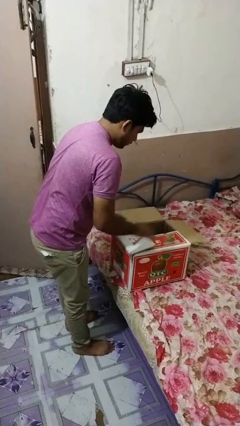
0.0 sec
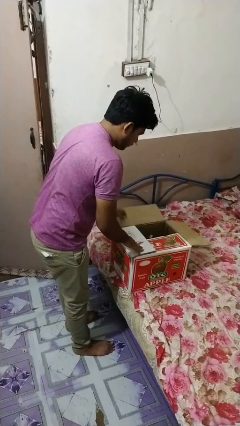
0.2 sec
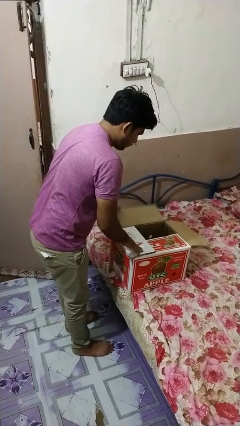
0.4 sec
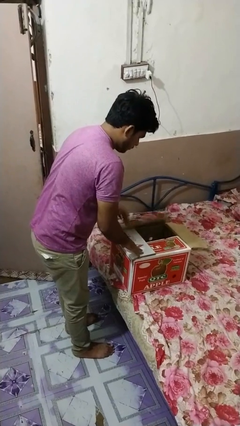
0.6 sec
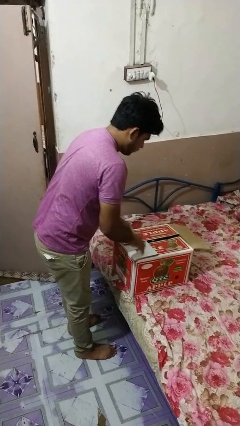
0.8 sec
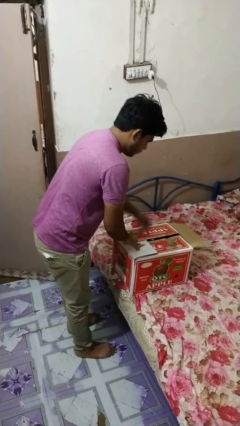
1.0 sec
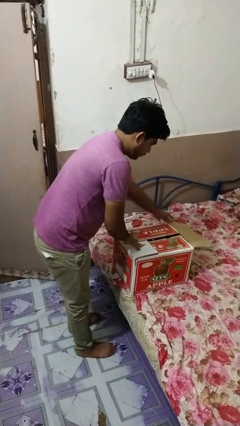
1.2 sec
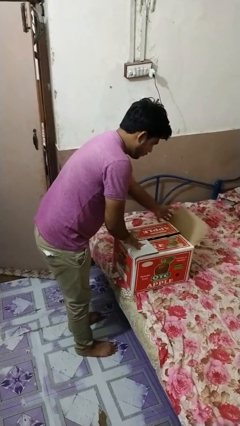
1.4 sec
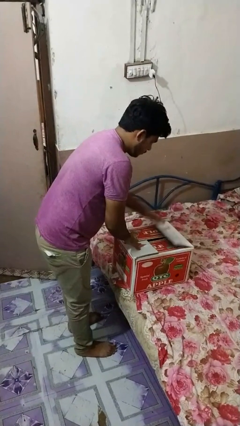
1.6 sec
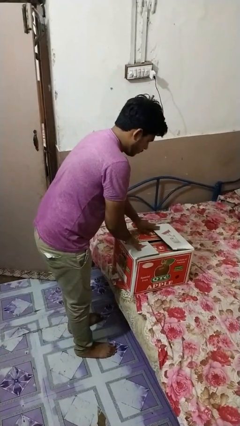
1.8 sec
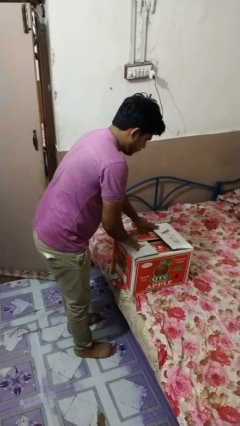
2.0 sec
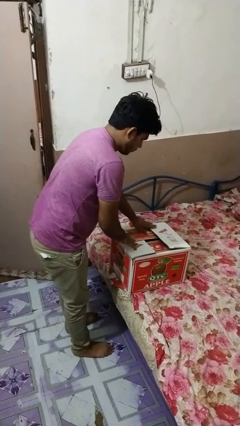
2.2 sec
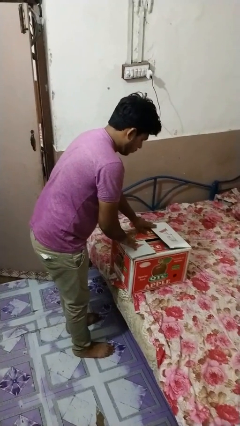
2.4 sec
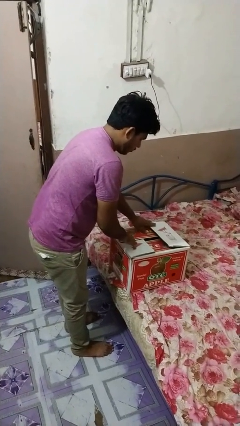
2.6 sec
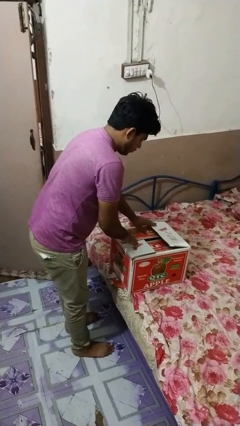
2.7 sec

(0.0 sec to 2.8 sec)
person closes box

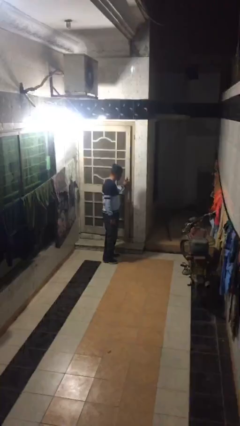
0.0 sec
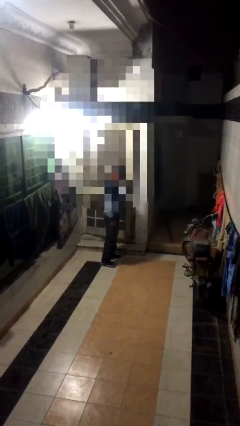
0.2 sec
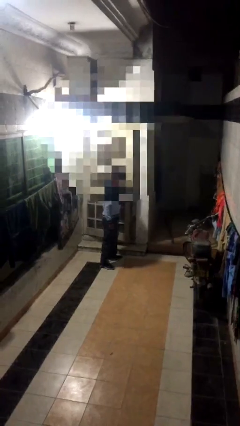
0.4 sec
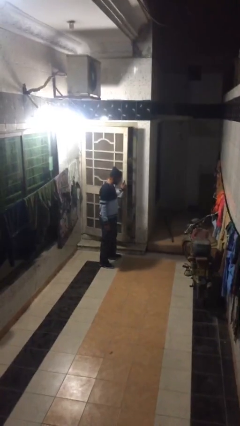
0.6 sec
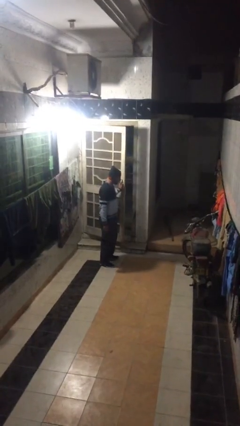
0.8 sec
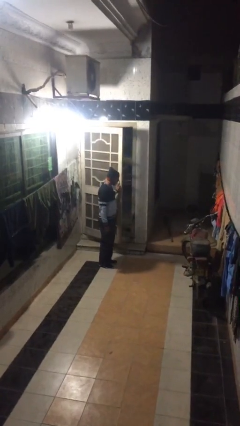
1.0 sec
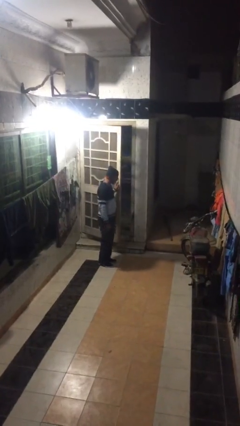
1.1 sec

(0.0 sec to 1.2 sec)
person opens facility door

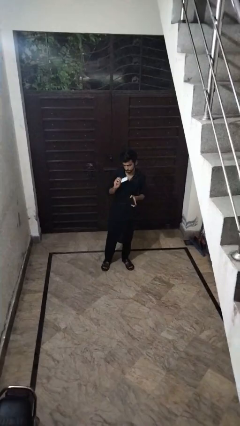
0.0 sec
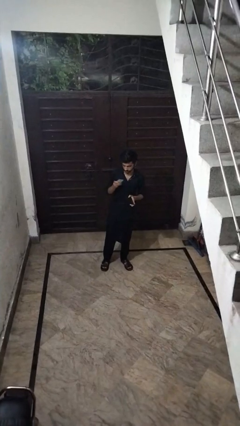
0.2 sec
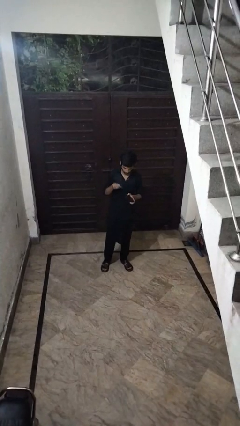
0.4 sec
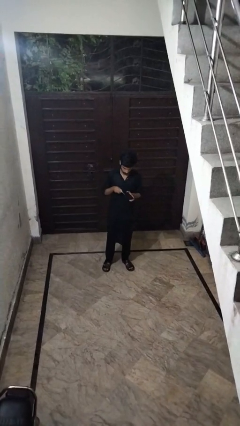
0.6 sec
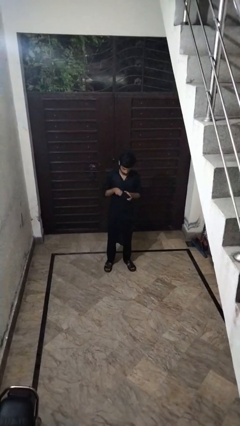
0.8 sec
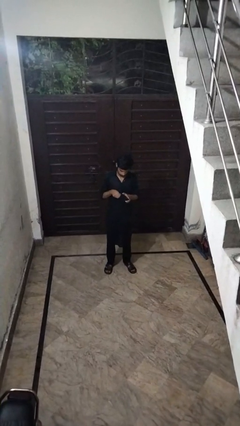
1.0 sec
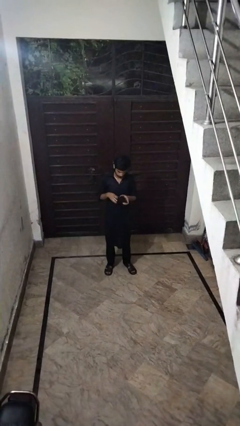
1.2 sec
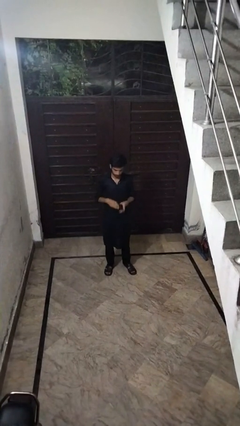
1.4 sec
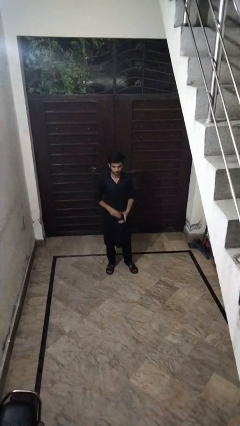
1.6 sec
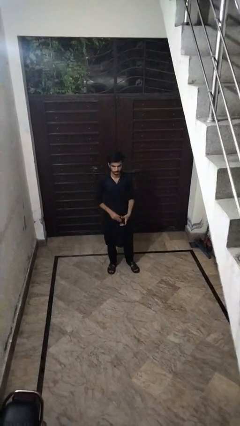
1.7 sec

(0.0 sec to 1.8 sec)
person puts object into purse

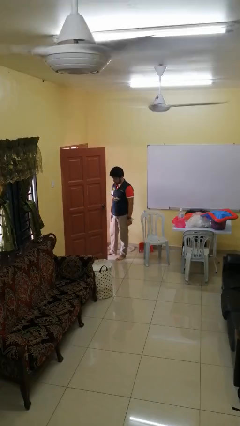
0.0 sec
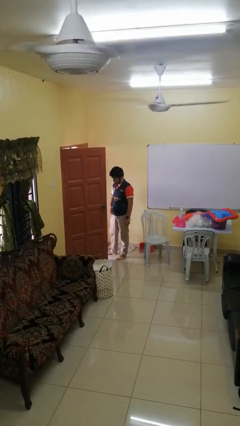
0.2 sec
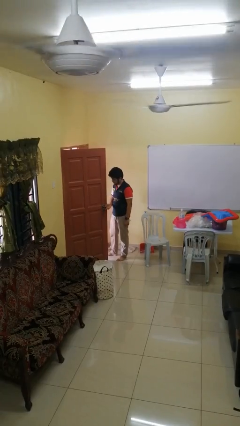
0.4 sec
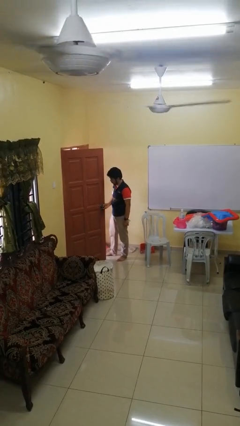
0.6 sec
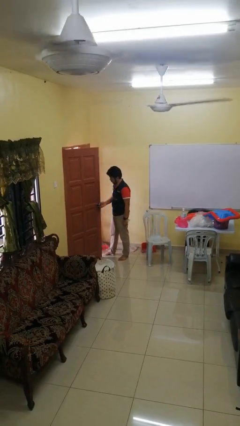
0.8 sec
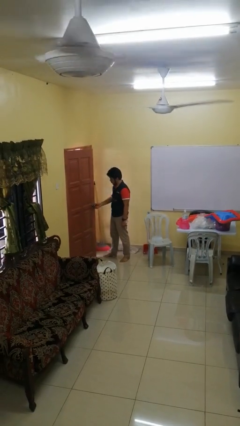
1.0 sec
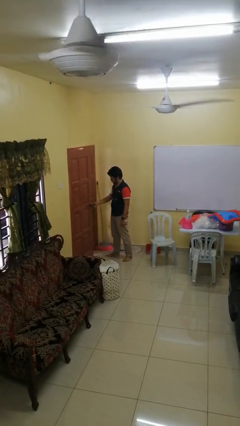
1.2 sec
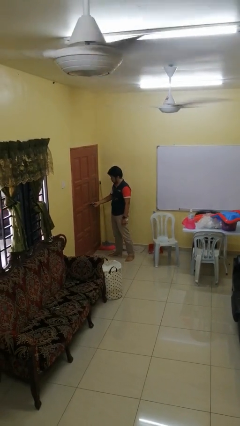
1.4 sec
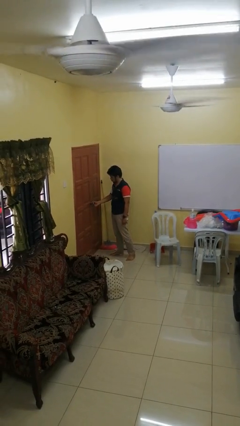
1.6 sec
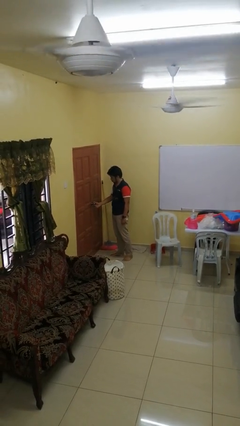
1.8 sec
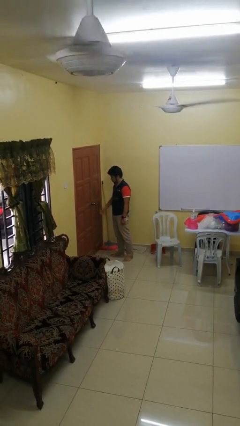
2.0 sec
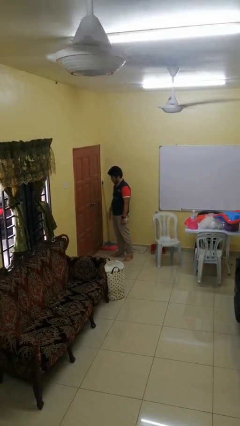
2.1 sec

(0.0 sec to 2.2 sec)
person closes facility door

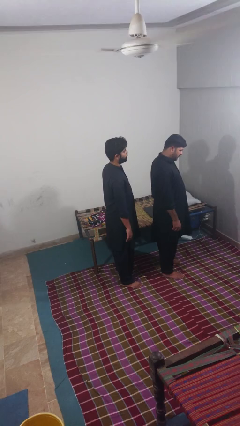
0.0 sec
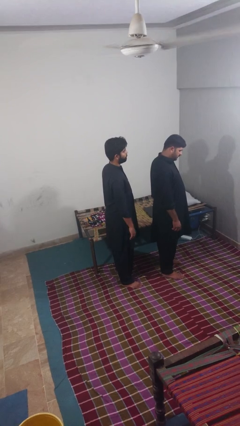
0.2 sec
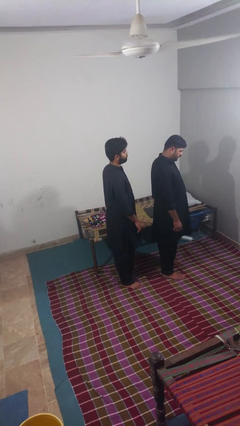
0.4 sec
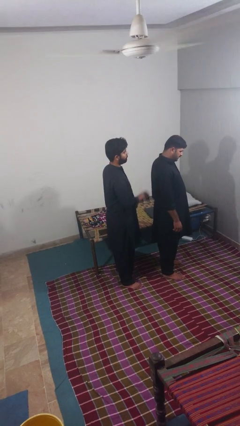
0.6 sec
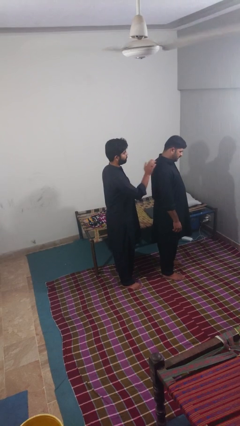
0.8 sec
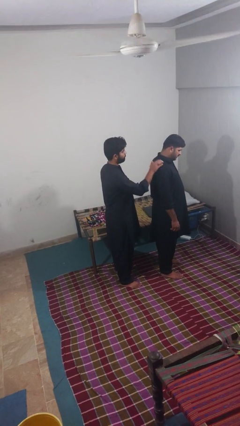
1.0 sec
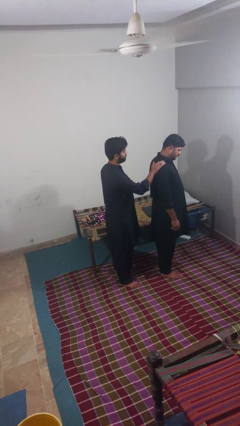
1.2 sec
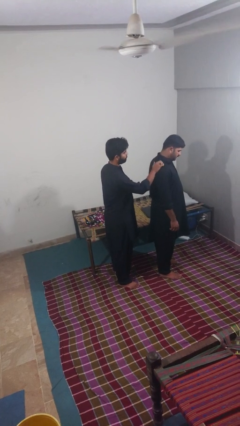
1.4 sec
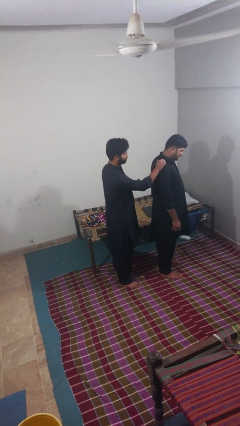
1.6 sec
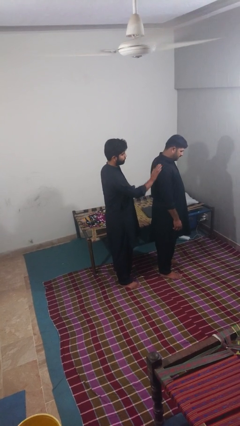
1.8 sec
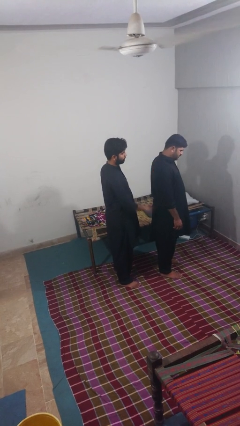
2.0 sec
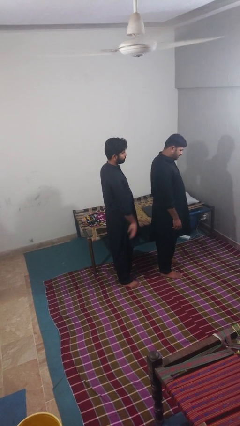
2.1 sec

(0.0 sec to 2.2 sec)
person touches back of person

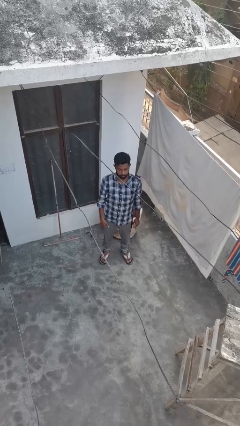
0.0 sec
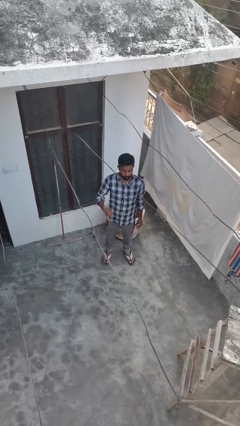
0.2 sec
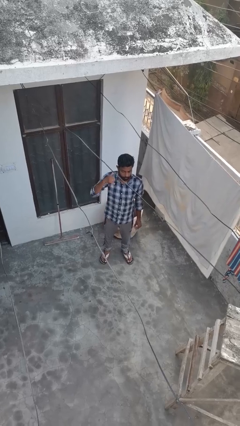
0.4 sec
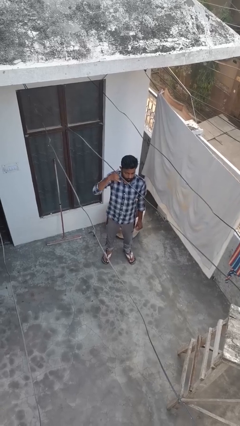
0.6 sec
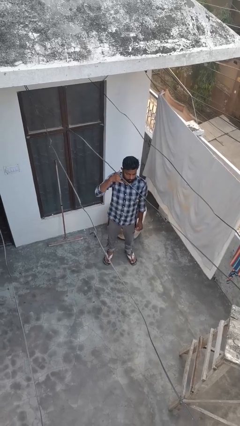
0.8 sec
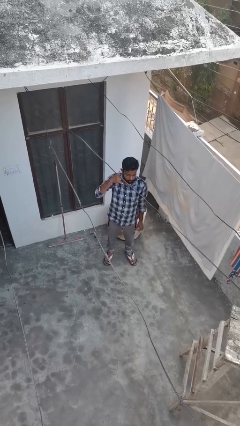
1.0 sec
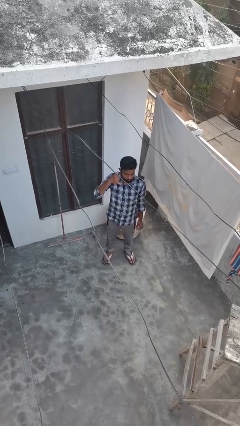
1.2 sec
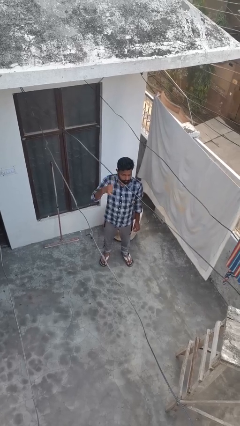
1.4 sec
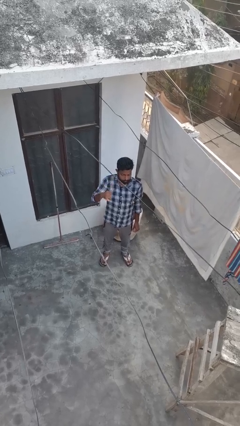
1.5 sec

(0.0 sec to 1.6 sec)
person gestures call me

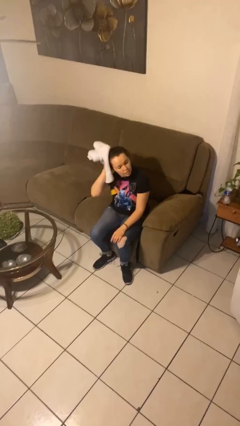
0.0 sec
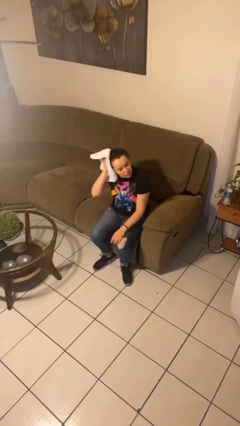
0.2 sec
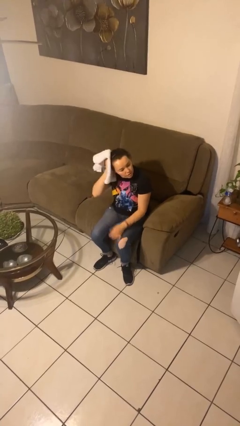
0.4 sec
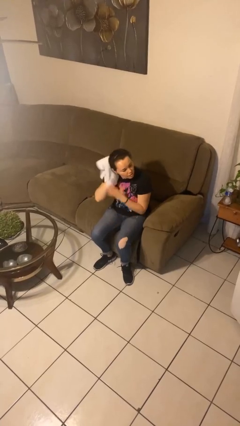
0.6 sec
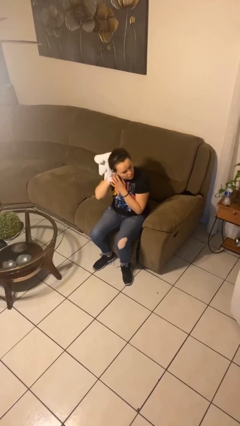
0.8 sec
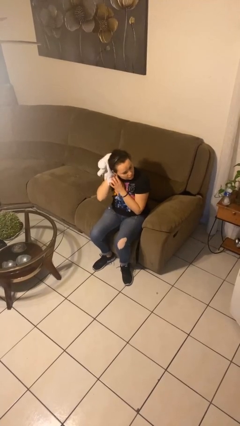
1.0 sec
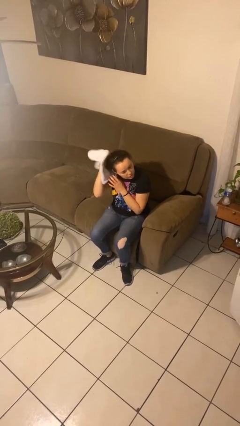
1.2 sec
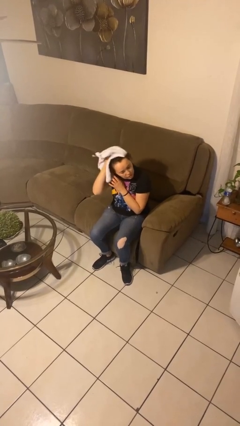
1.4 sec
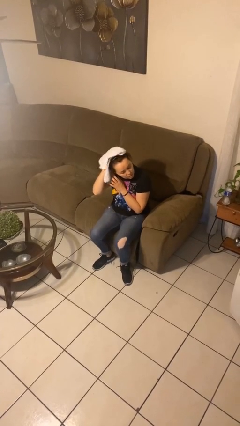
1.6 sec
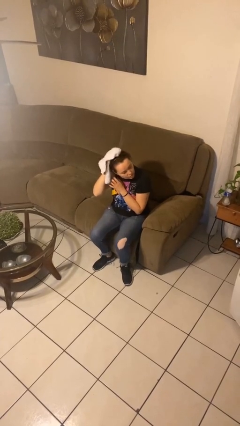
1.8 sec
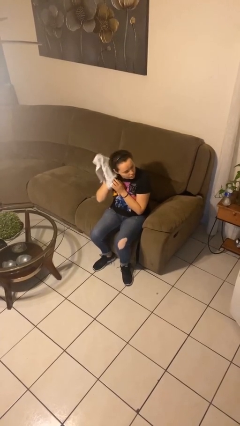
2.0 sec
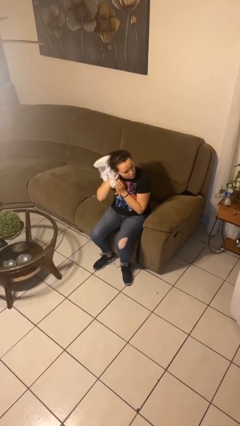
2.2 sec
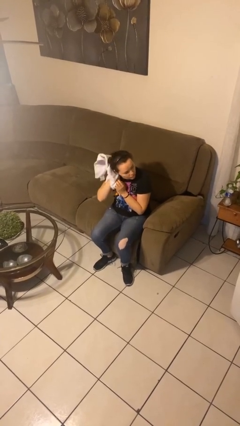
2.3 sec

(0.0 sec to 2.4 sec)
person dries hair with towel

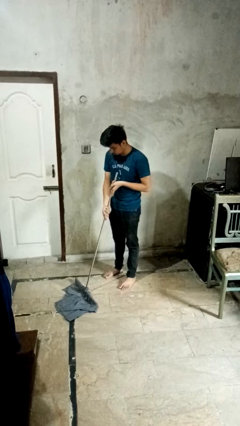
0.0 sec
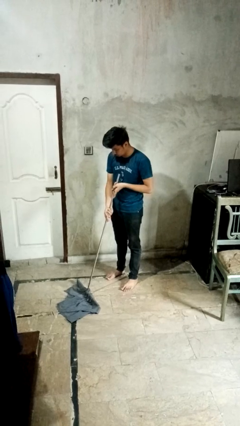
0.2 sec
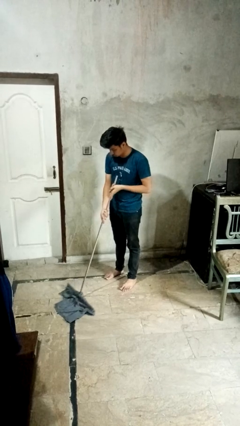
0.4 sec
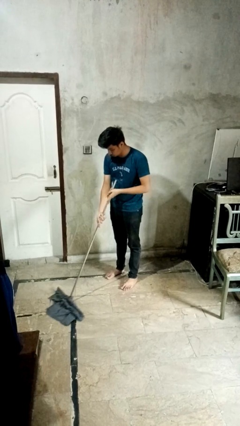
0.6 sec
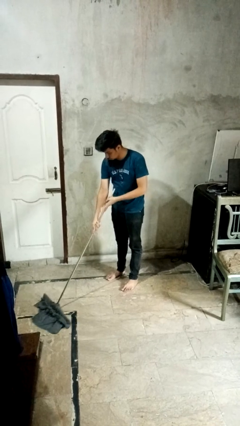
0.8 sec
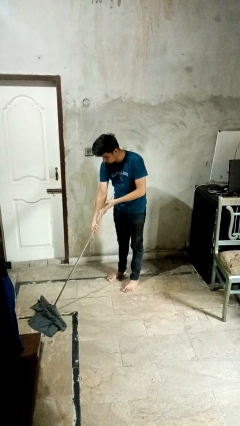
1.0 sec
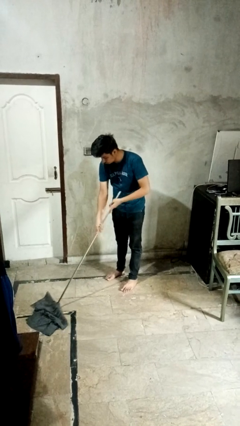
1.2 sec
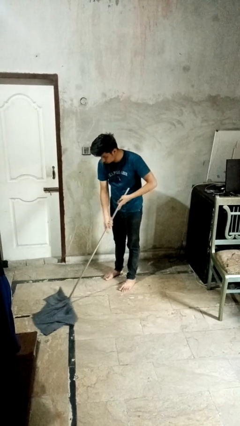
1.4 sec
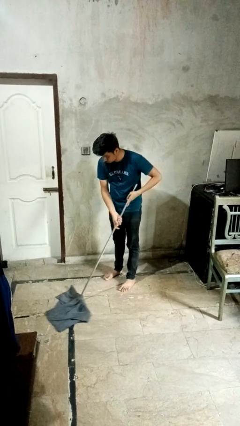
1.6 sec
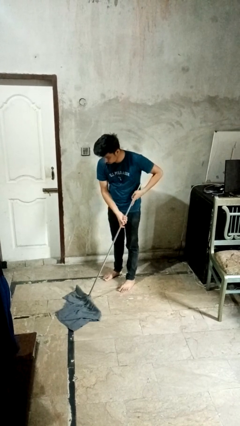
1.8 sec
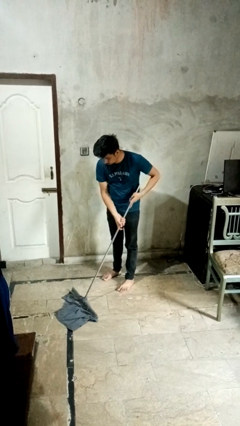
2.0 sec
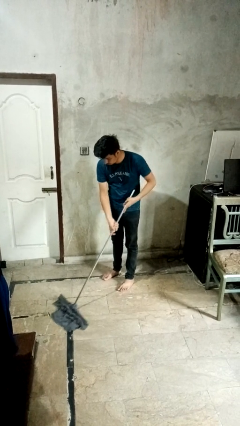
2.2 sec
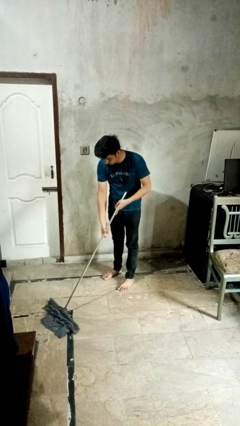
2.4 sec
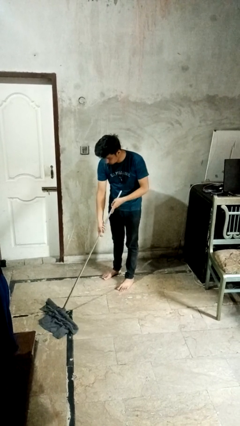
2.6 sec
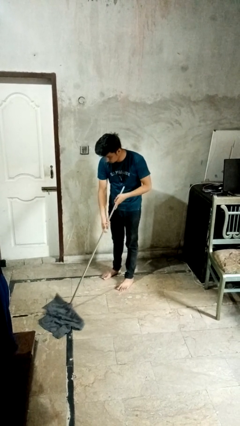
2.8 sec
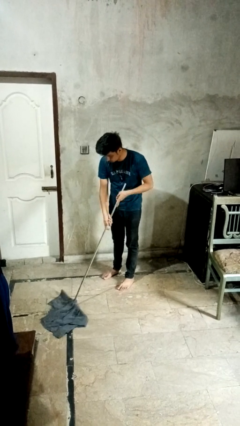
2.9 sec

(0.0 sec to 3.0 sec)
person mops
